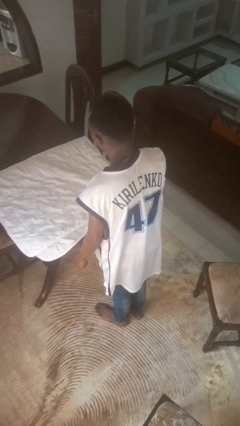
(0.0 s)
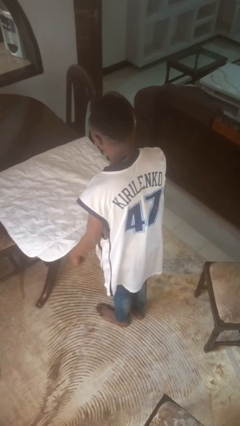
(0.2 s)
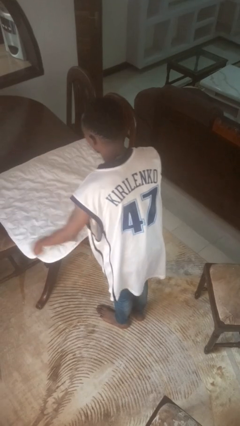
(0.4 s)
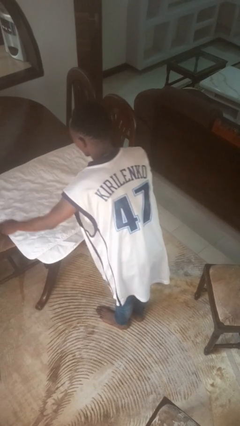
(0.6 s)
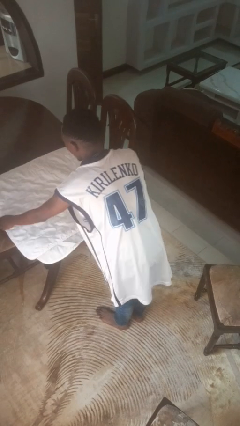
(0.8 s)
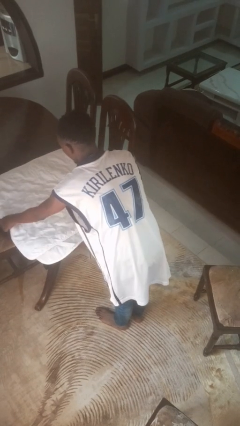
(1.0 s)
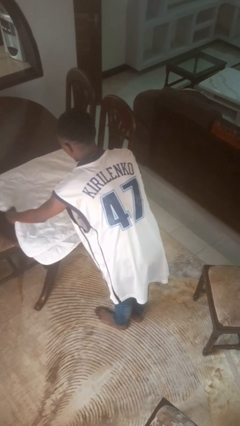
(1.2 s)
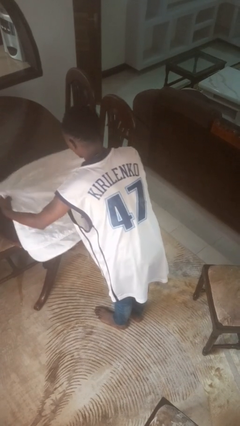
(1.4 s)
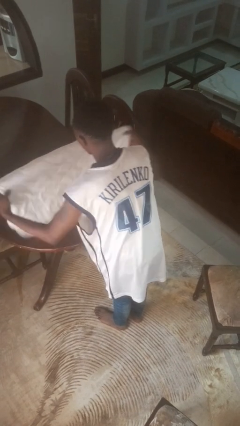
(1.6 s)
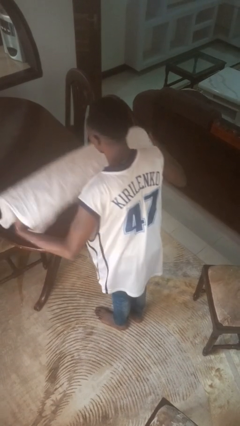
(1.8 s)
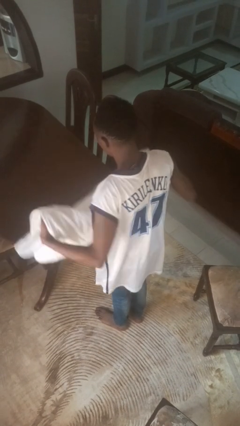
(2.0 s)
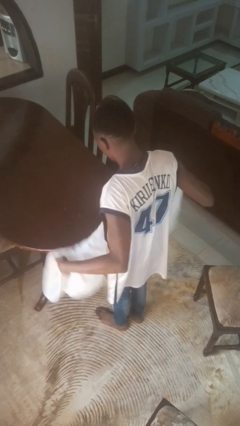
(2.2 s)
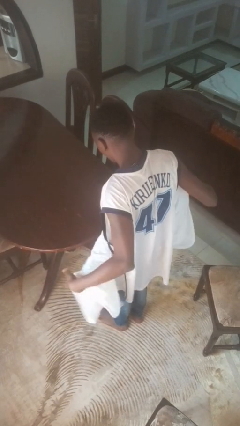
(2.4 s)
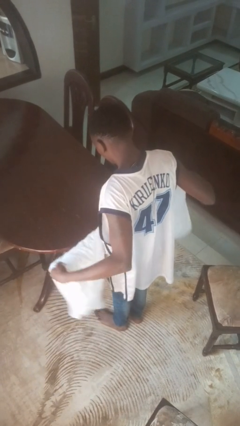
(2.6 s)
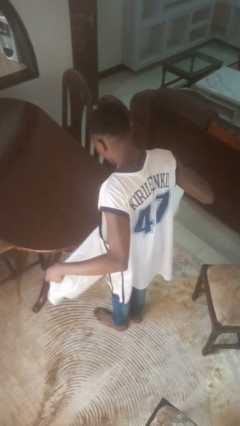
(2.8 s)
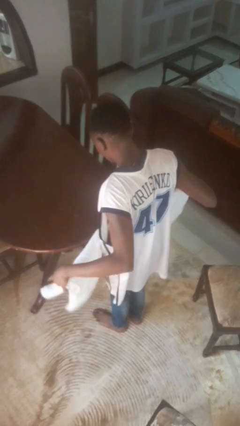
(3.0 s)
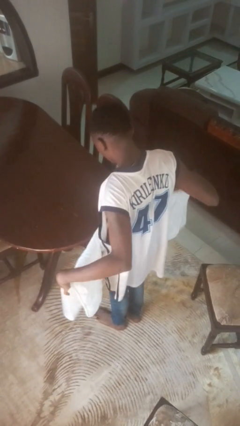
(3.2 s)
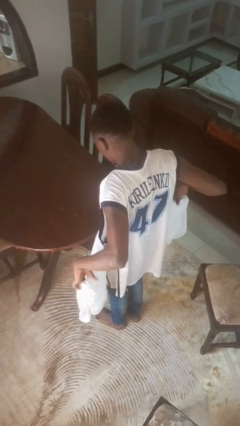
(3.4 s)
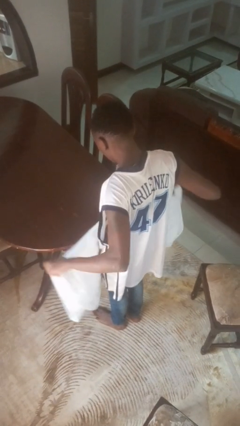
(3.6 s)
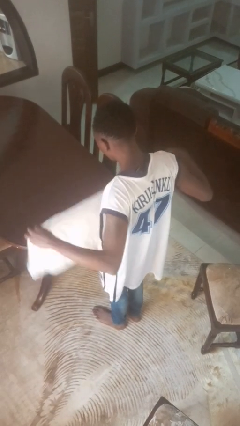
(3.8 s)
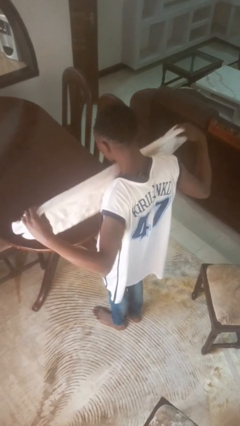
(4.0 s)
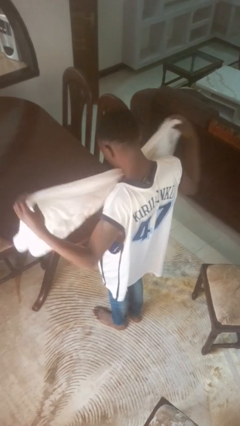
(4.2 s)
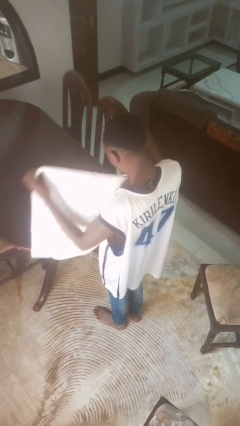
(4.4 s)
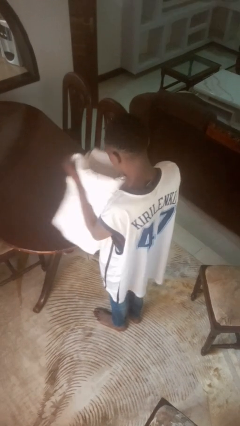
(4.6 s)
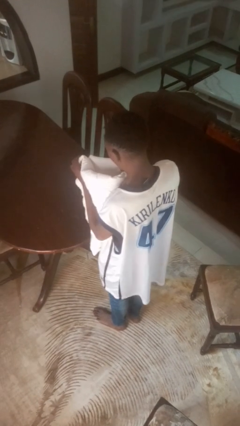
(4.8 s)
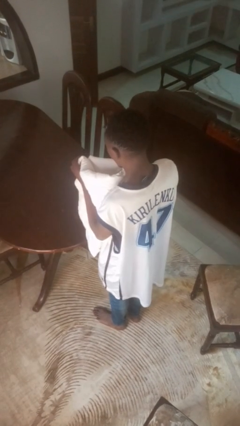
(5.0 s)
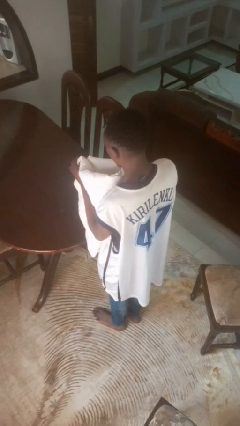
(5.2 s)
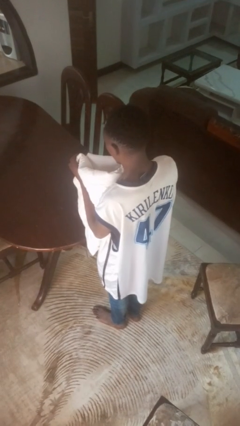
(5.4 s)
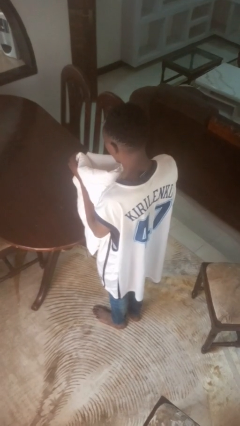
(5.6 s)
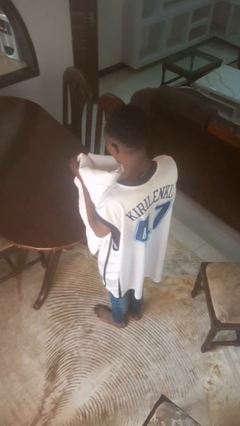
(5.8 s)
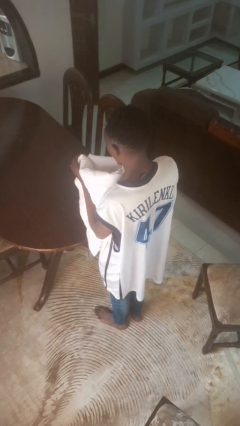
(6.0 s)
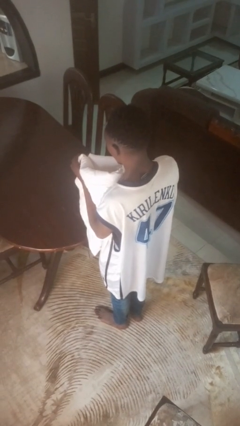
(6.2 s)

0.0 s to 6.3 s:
person folds tablecloth

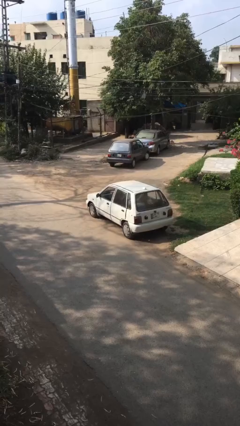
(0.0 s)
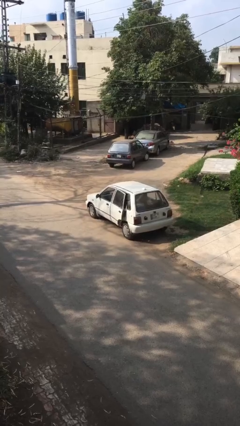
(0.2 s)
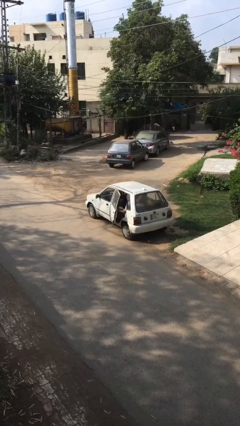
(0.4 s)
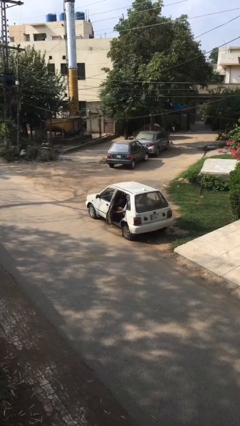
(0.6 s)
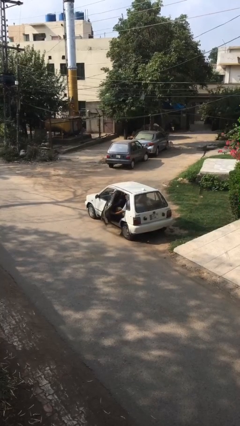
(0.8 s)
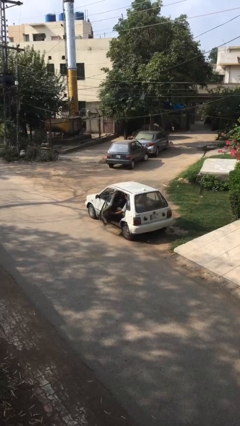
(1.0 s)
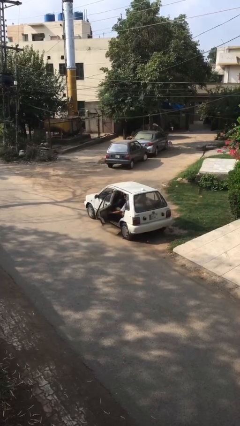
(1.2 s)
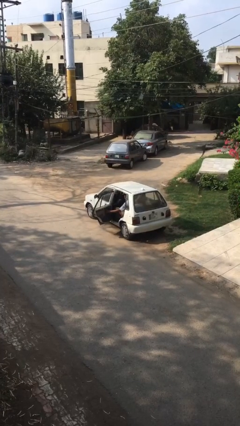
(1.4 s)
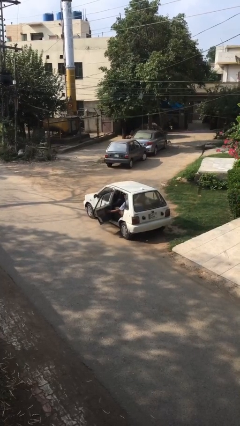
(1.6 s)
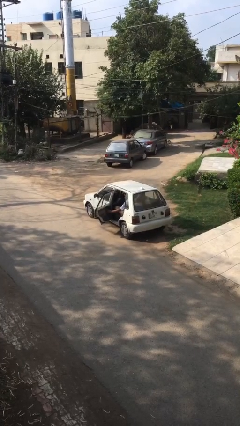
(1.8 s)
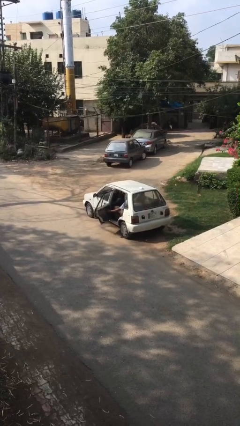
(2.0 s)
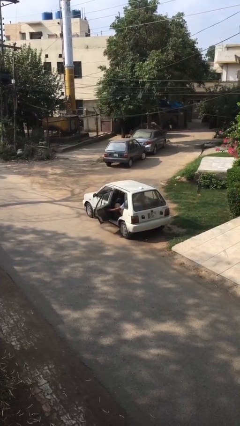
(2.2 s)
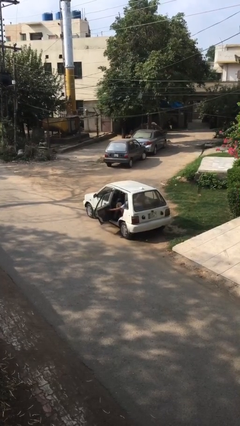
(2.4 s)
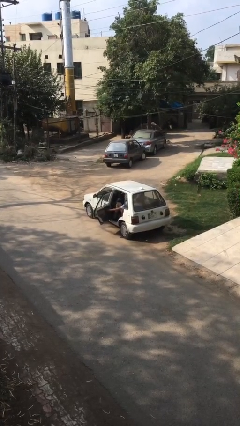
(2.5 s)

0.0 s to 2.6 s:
person opens car door

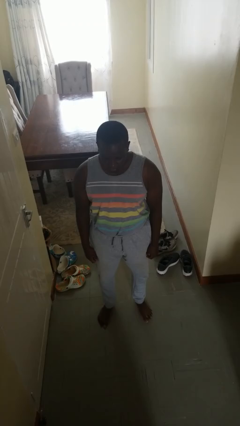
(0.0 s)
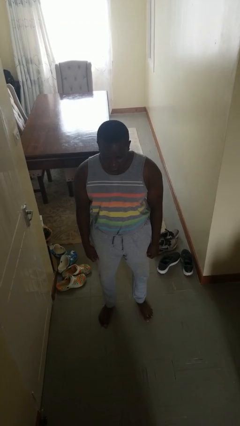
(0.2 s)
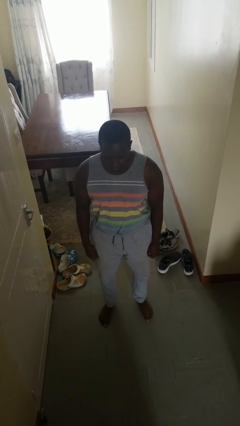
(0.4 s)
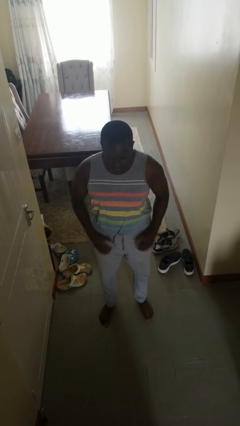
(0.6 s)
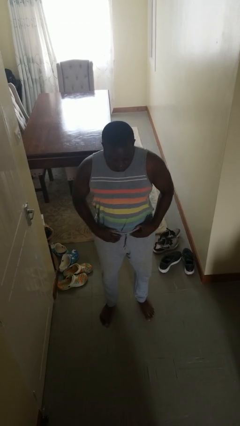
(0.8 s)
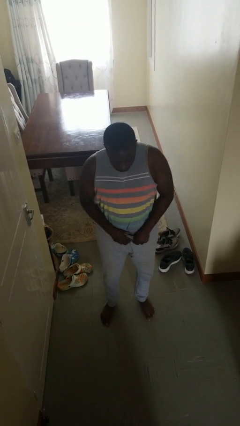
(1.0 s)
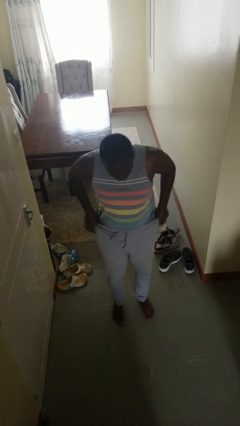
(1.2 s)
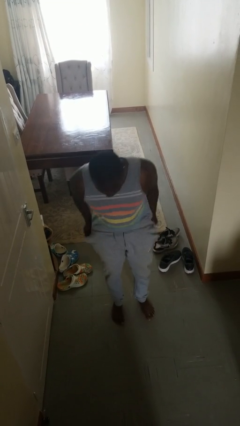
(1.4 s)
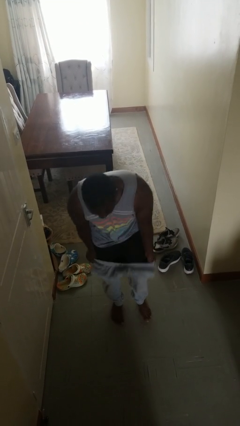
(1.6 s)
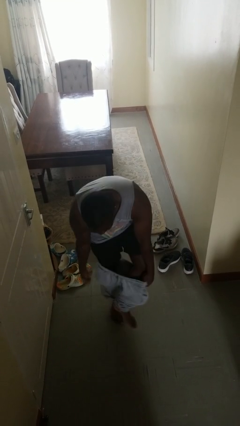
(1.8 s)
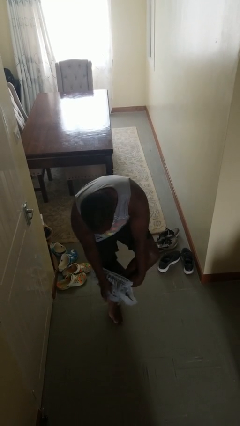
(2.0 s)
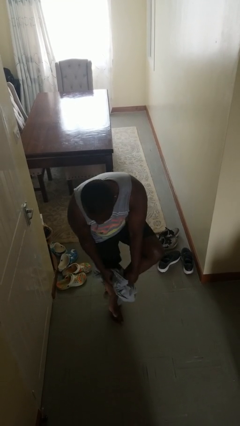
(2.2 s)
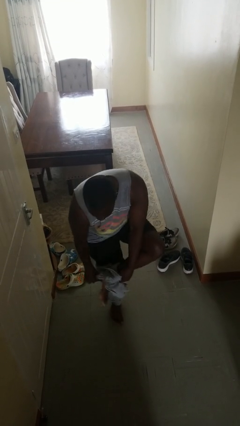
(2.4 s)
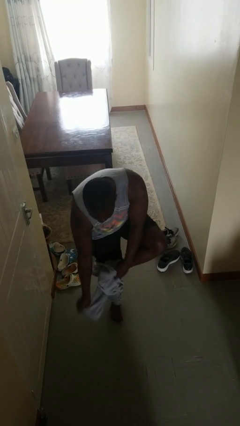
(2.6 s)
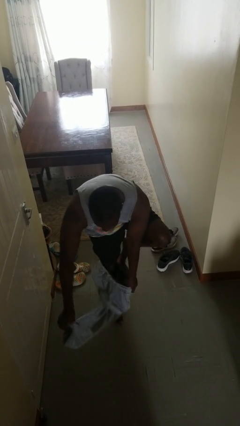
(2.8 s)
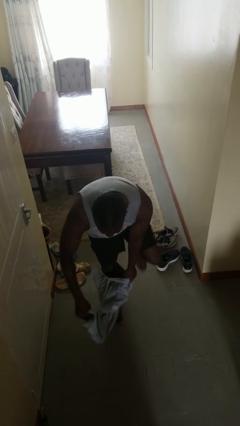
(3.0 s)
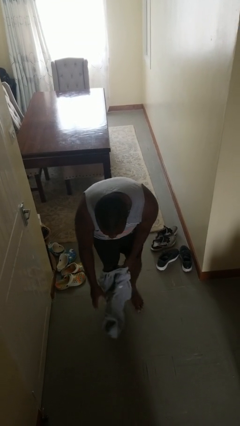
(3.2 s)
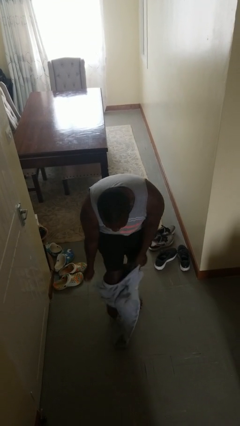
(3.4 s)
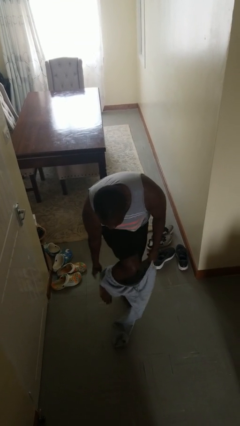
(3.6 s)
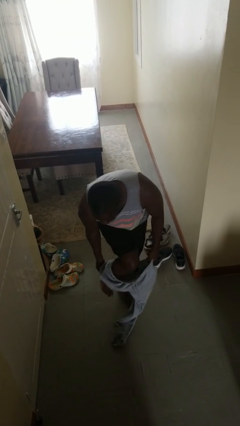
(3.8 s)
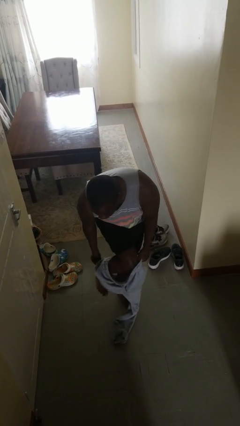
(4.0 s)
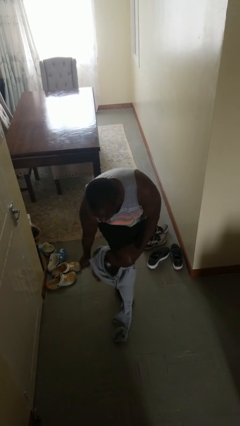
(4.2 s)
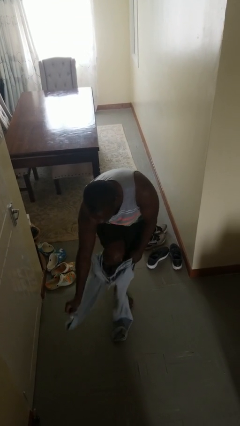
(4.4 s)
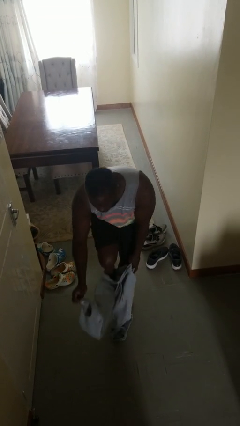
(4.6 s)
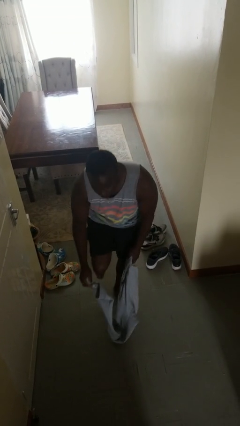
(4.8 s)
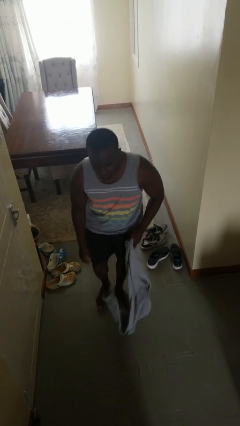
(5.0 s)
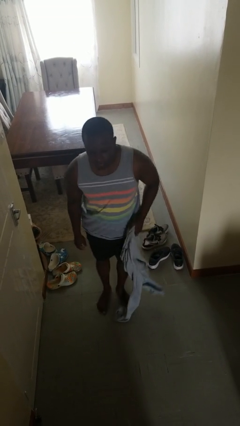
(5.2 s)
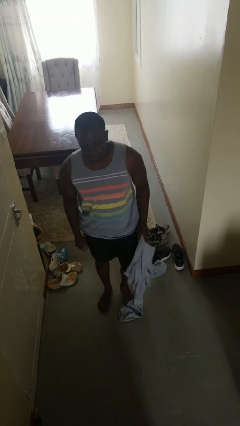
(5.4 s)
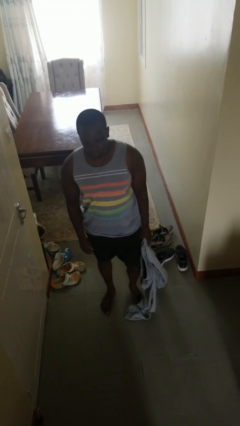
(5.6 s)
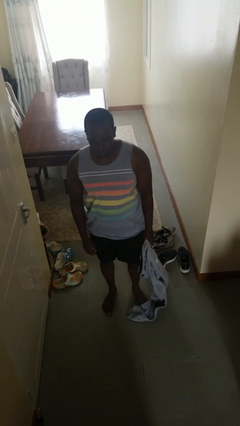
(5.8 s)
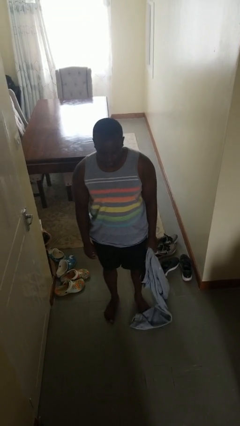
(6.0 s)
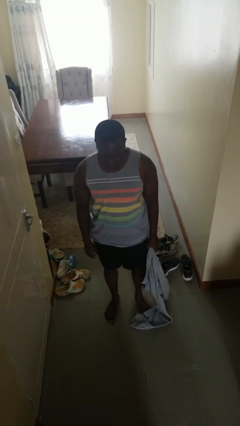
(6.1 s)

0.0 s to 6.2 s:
person takes off pants

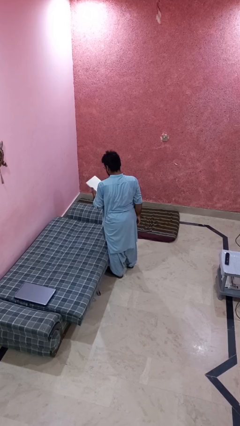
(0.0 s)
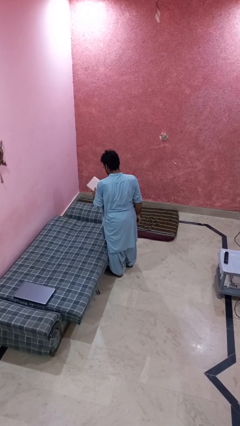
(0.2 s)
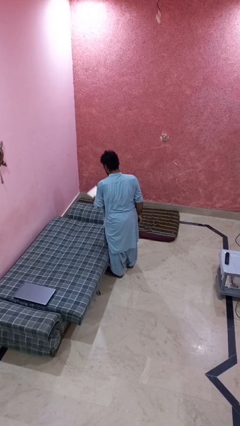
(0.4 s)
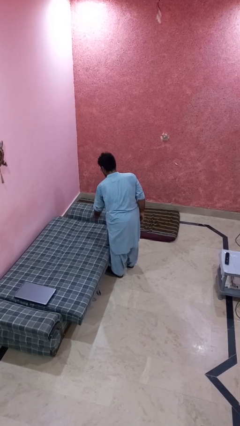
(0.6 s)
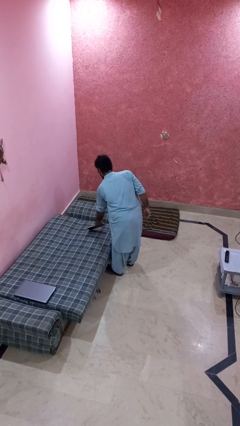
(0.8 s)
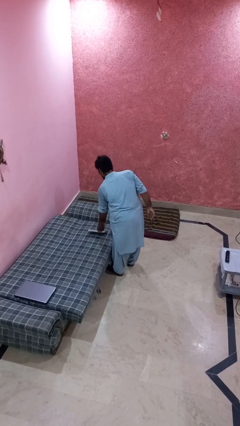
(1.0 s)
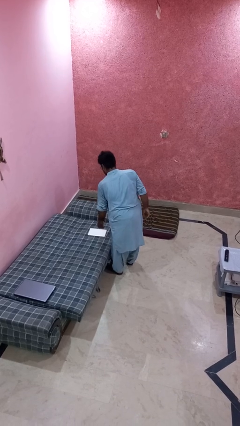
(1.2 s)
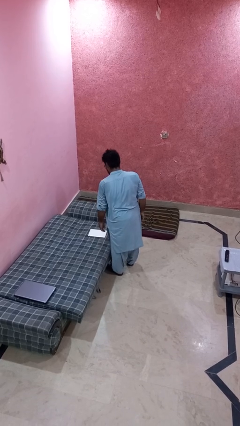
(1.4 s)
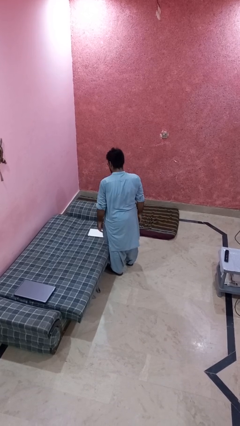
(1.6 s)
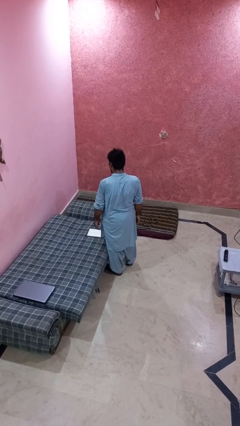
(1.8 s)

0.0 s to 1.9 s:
person puts down object on bed

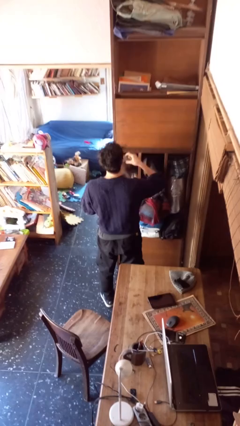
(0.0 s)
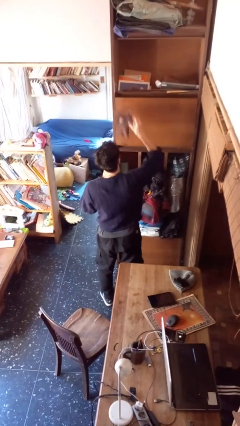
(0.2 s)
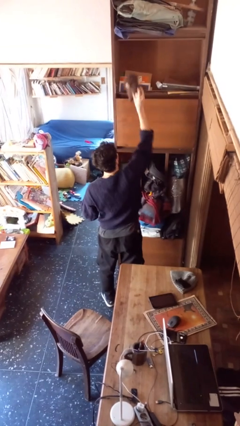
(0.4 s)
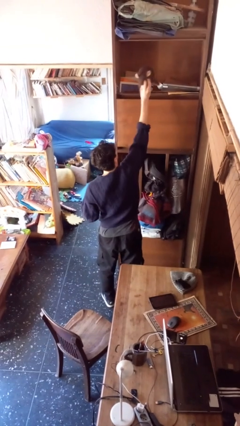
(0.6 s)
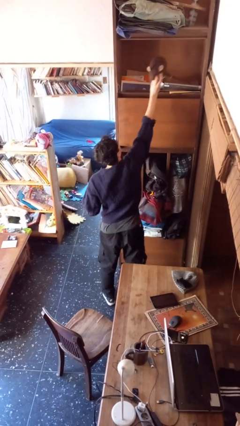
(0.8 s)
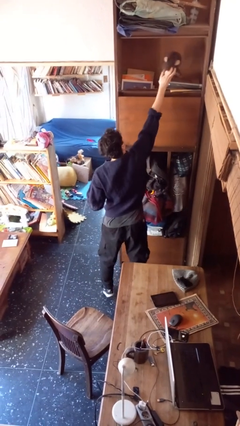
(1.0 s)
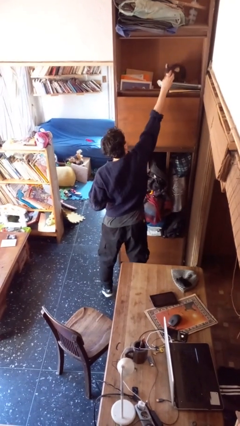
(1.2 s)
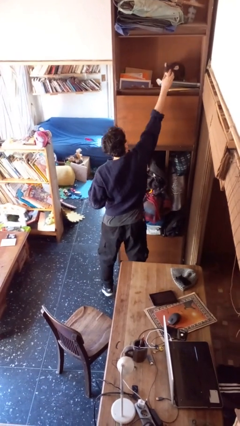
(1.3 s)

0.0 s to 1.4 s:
person puts down object on shelf
